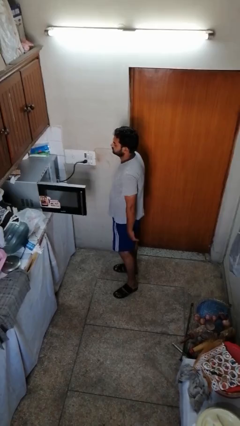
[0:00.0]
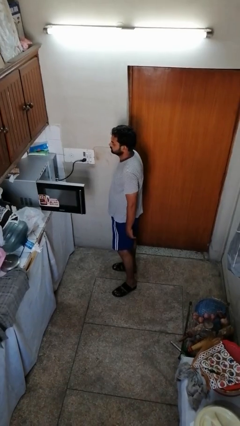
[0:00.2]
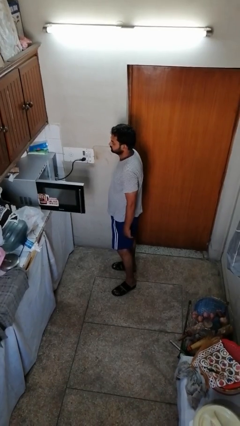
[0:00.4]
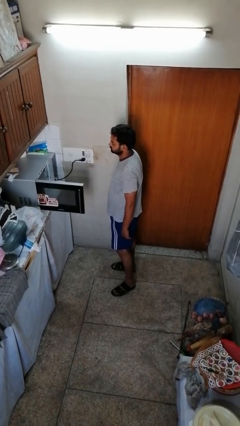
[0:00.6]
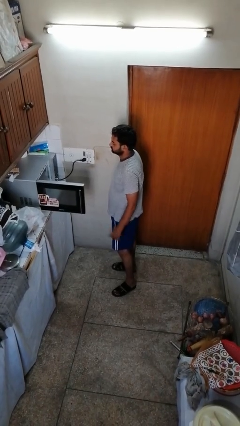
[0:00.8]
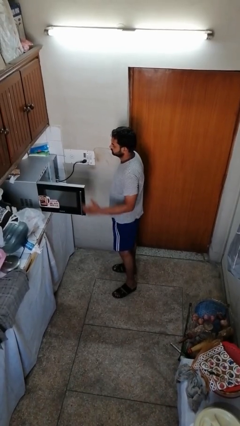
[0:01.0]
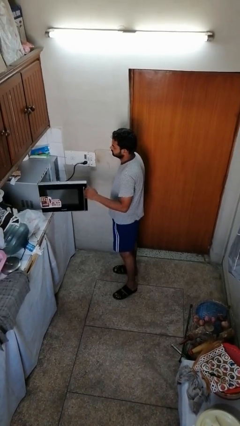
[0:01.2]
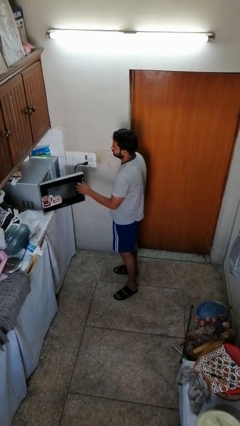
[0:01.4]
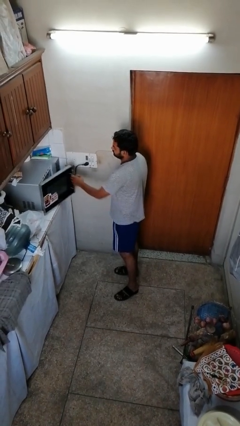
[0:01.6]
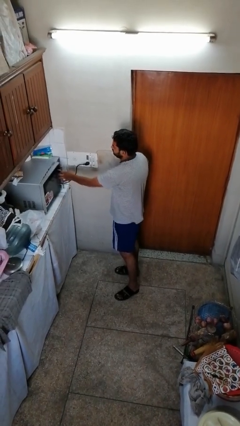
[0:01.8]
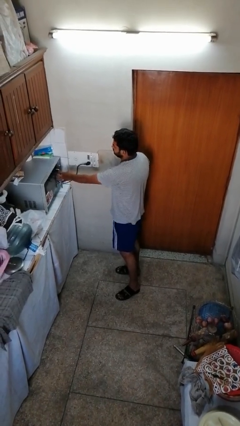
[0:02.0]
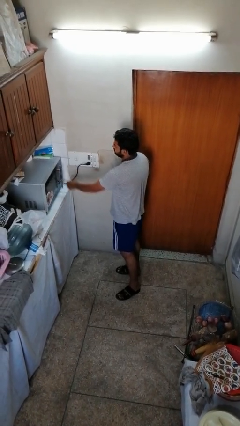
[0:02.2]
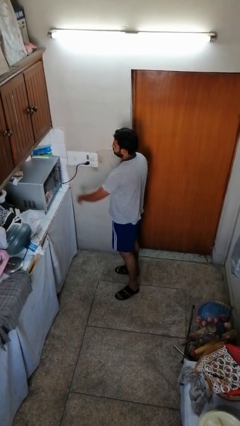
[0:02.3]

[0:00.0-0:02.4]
person closes oven door

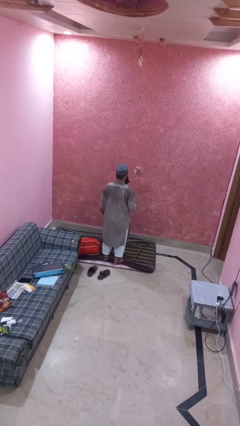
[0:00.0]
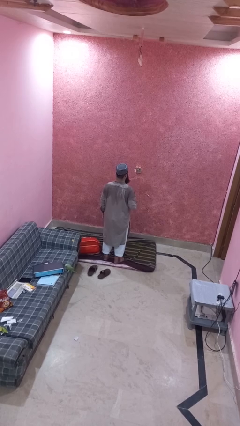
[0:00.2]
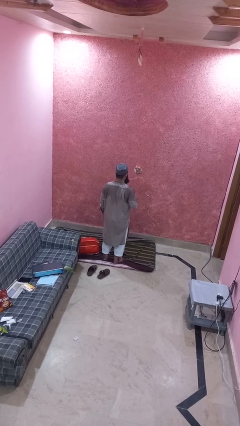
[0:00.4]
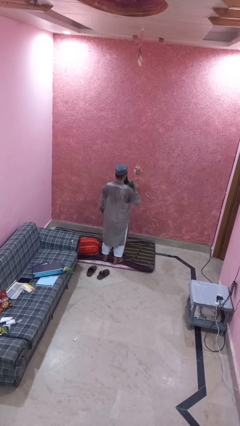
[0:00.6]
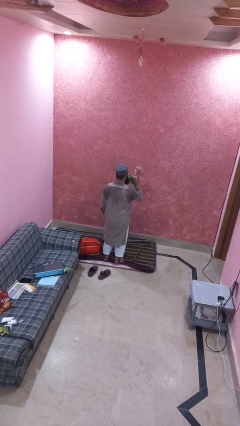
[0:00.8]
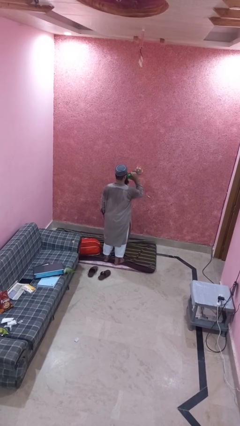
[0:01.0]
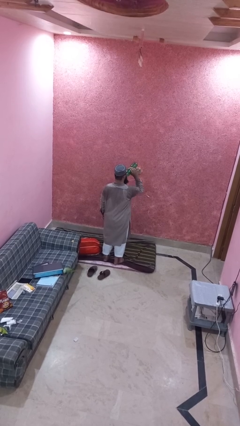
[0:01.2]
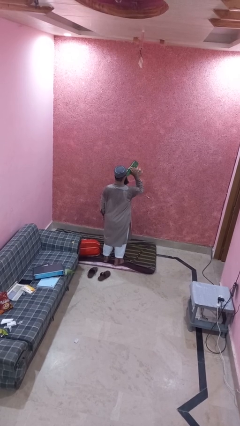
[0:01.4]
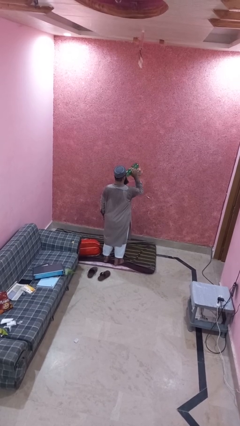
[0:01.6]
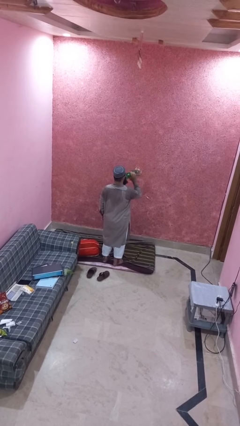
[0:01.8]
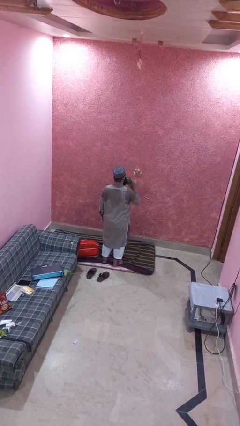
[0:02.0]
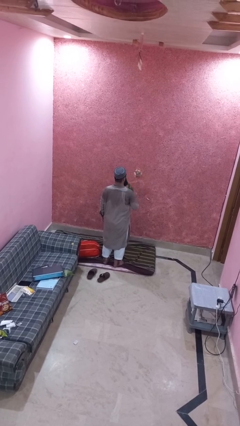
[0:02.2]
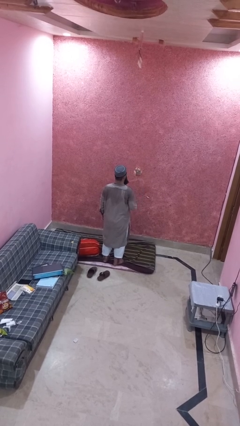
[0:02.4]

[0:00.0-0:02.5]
person drinks from bottle

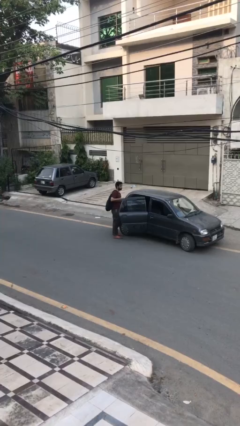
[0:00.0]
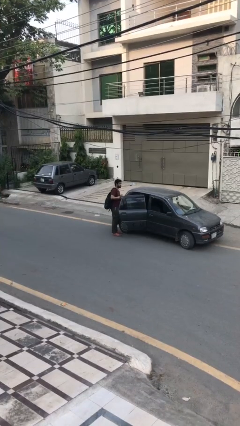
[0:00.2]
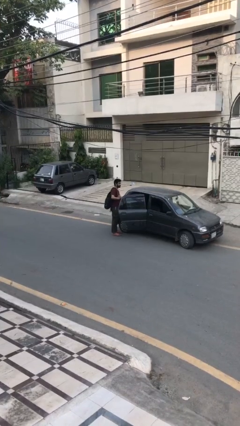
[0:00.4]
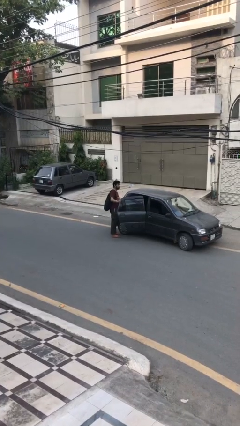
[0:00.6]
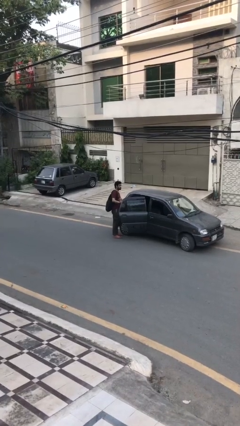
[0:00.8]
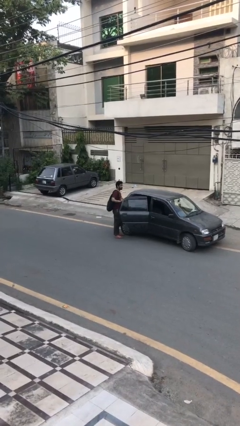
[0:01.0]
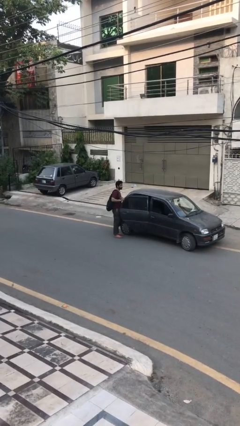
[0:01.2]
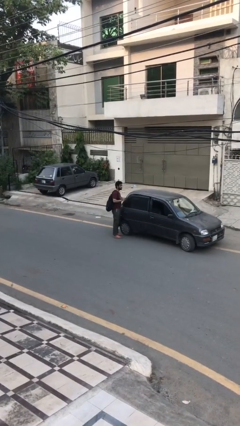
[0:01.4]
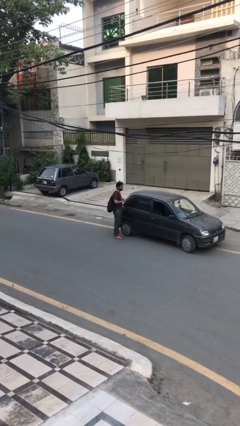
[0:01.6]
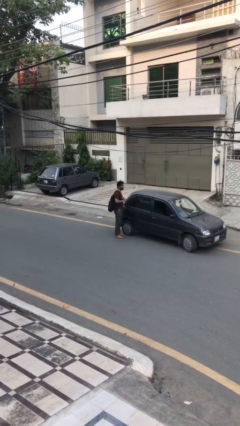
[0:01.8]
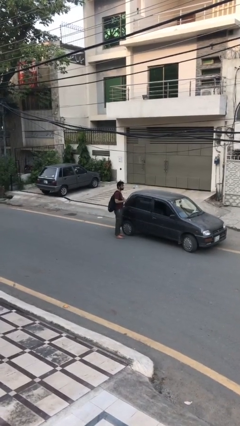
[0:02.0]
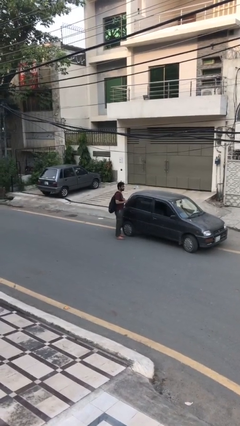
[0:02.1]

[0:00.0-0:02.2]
person closes car door

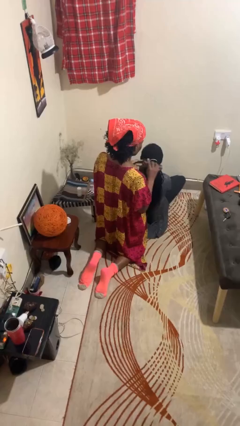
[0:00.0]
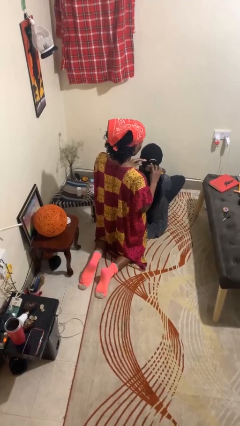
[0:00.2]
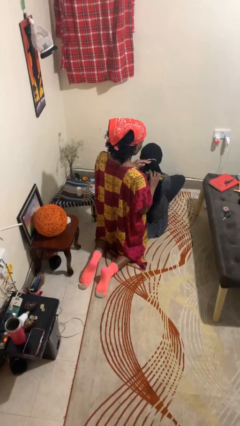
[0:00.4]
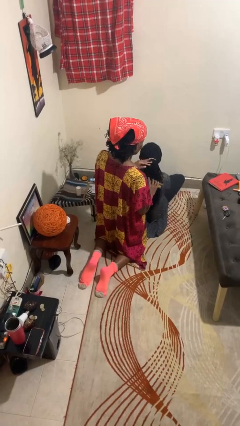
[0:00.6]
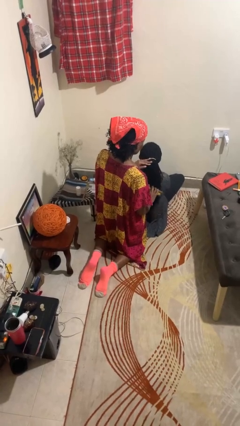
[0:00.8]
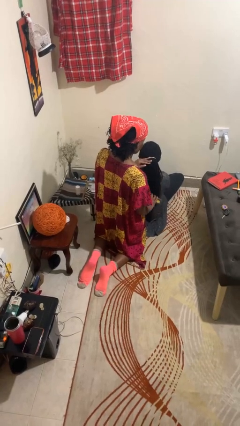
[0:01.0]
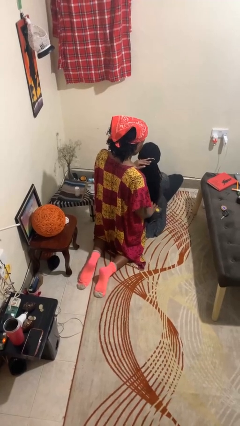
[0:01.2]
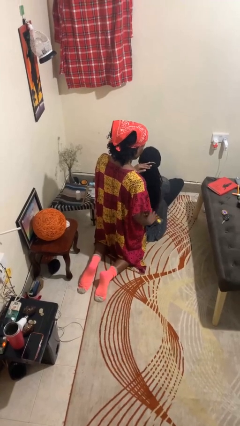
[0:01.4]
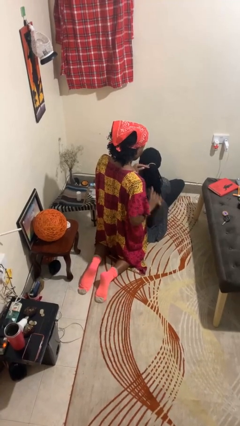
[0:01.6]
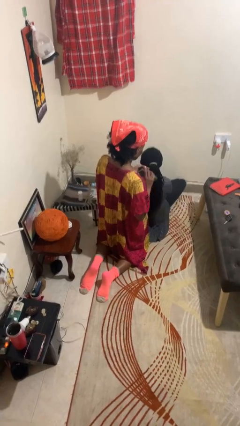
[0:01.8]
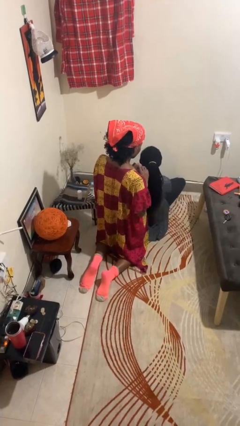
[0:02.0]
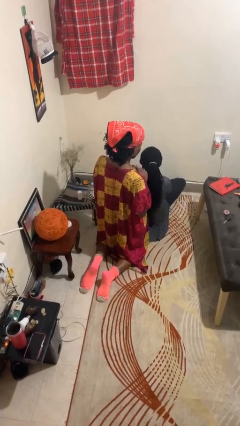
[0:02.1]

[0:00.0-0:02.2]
person brushes hair of person

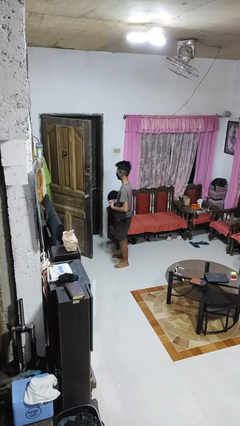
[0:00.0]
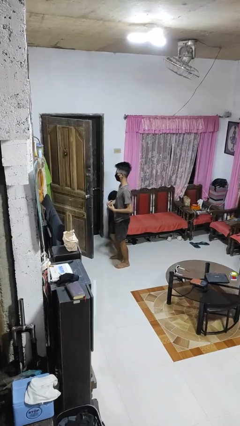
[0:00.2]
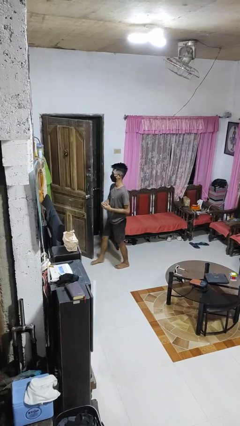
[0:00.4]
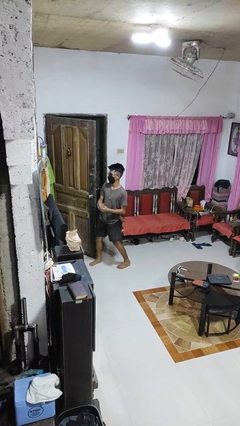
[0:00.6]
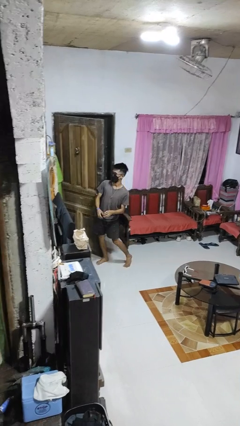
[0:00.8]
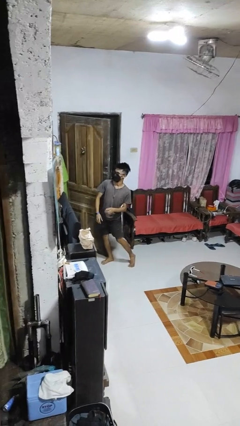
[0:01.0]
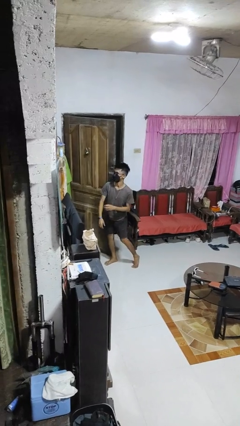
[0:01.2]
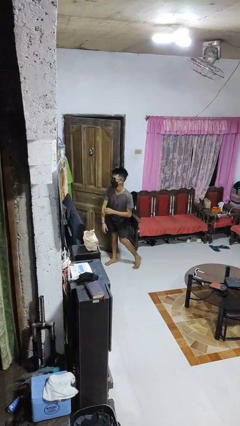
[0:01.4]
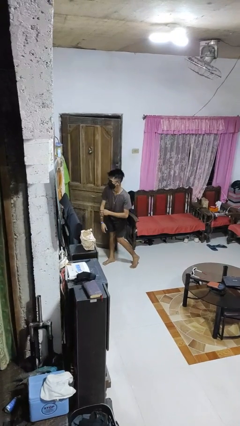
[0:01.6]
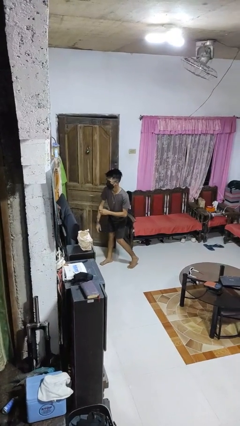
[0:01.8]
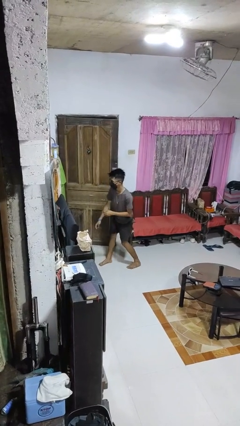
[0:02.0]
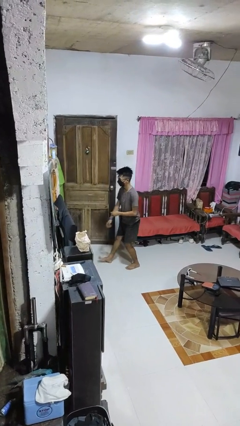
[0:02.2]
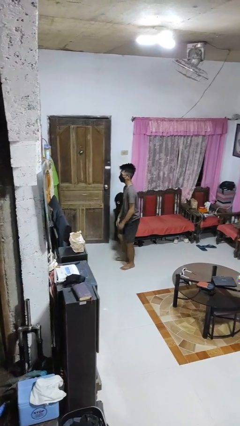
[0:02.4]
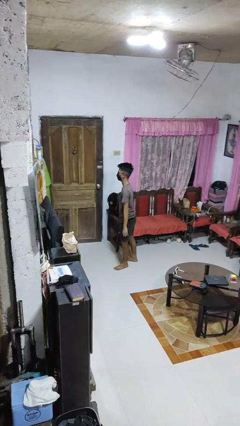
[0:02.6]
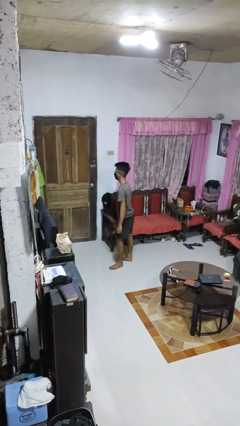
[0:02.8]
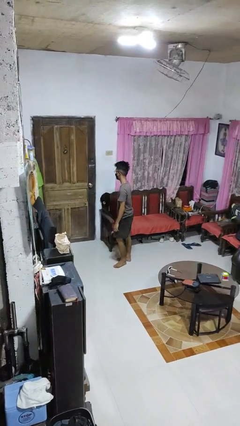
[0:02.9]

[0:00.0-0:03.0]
person closes door with hip

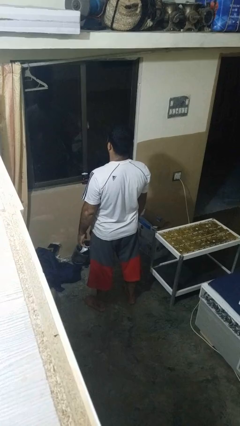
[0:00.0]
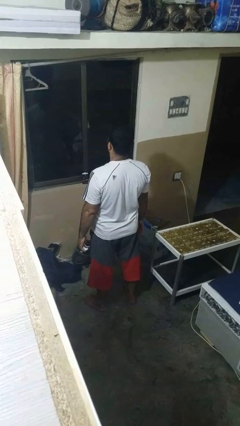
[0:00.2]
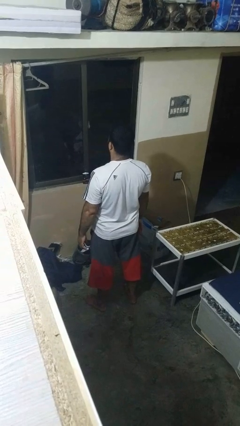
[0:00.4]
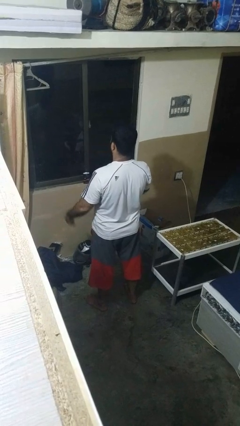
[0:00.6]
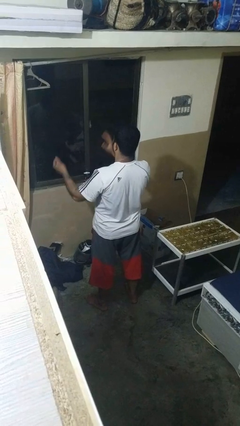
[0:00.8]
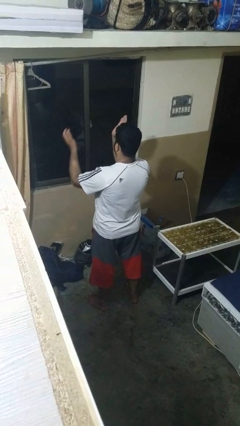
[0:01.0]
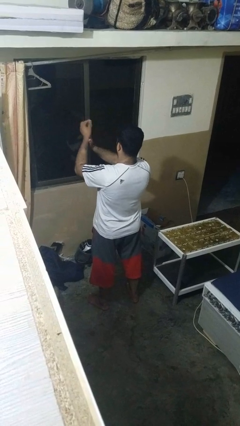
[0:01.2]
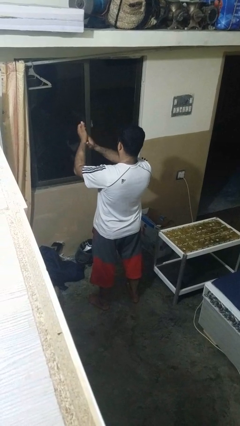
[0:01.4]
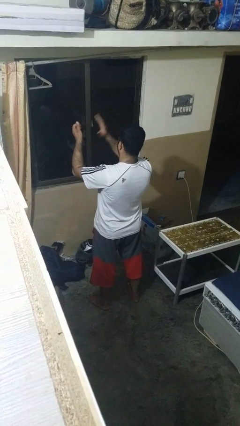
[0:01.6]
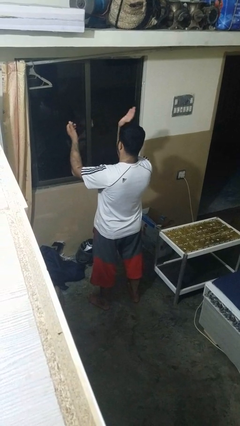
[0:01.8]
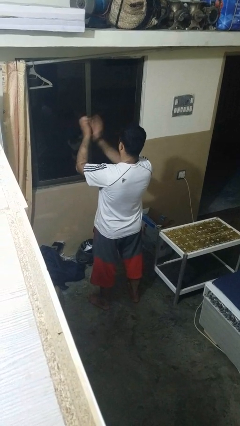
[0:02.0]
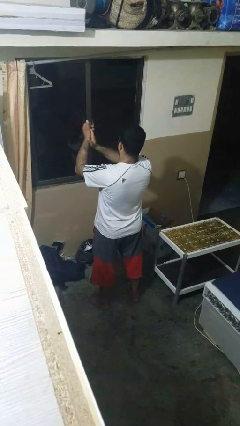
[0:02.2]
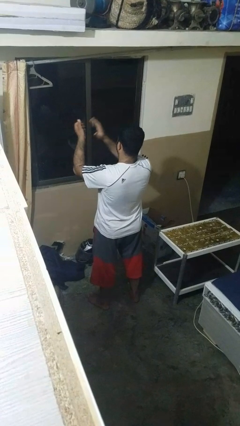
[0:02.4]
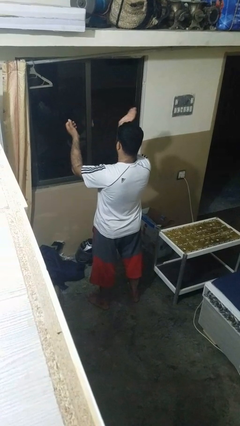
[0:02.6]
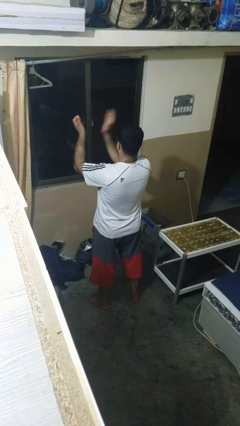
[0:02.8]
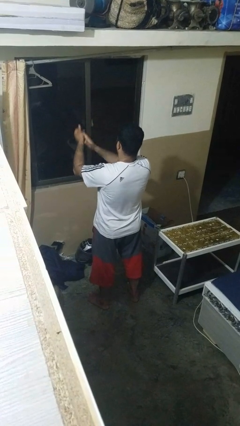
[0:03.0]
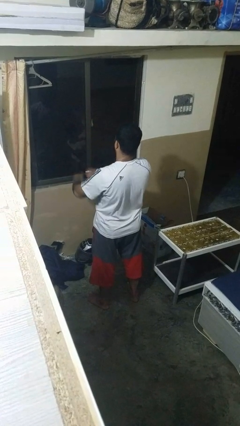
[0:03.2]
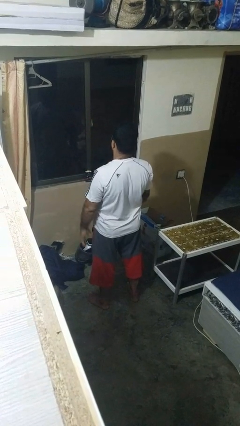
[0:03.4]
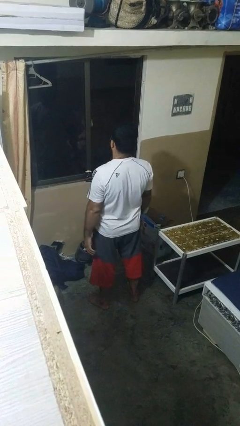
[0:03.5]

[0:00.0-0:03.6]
person claps hands

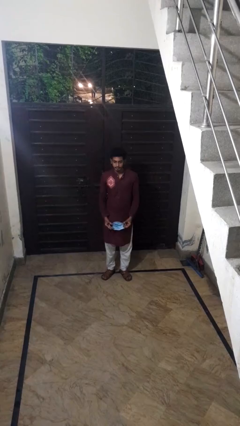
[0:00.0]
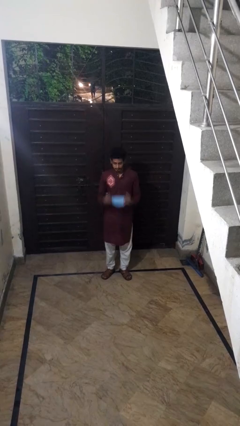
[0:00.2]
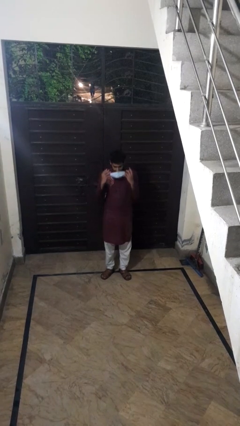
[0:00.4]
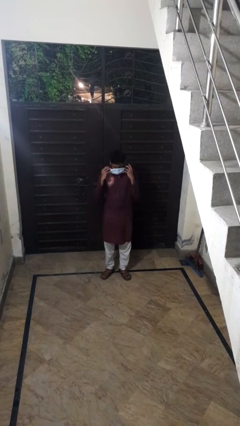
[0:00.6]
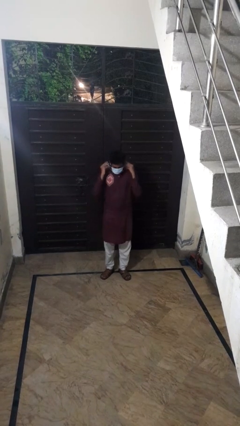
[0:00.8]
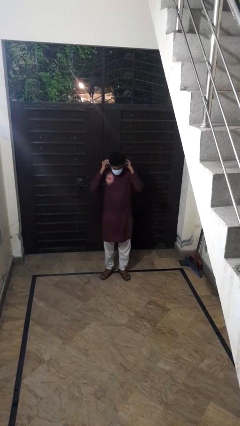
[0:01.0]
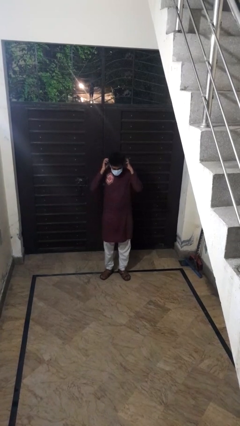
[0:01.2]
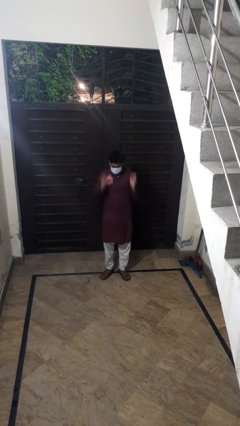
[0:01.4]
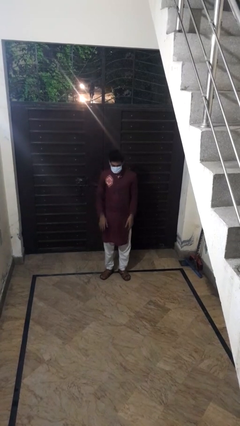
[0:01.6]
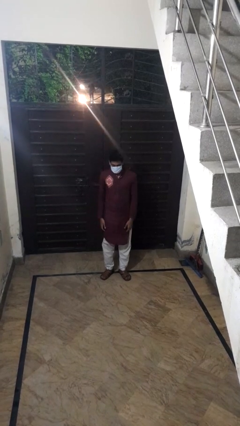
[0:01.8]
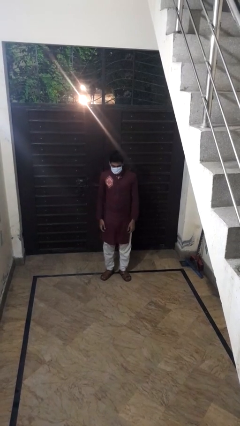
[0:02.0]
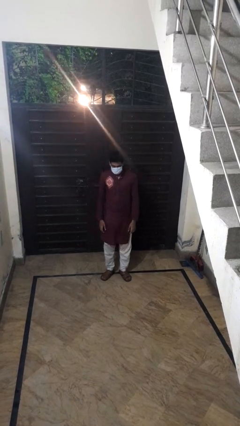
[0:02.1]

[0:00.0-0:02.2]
person puts on facemask
